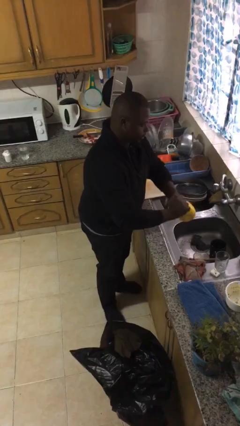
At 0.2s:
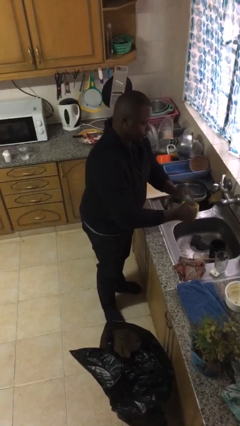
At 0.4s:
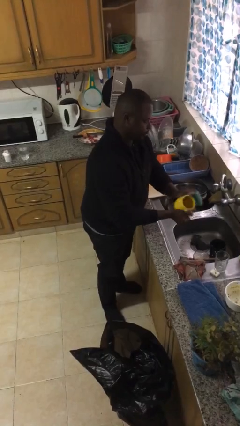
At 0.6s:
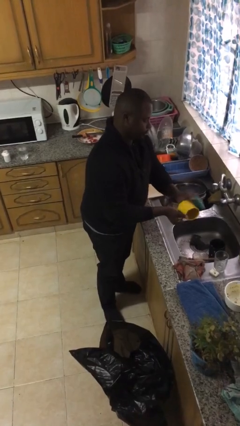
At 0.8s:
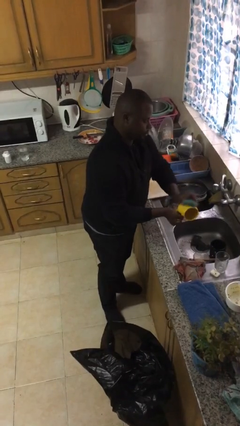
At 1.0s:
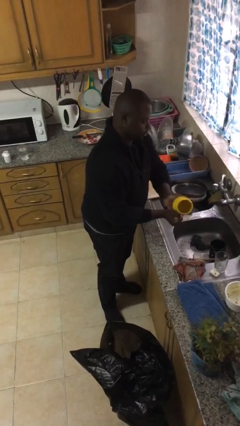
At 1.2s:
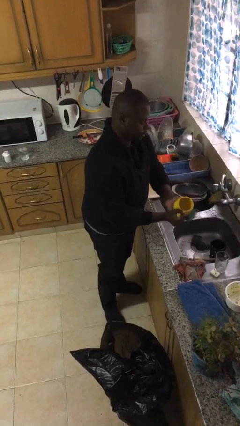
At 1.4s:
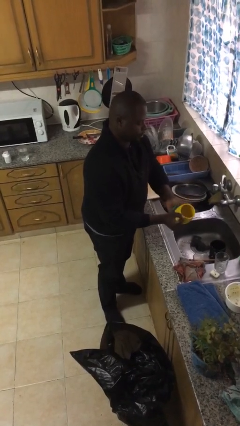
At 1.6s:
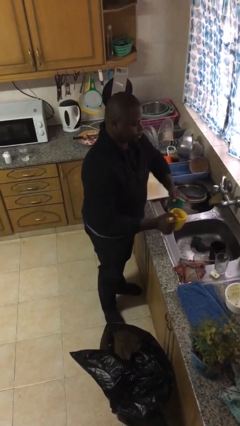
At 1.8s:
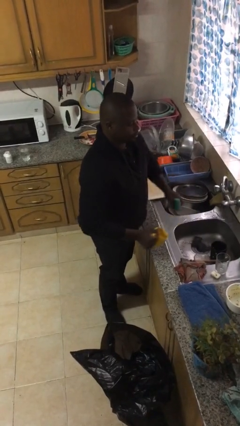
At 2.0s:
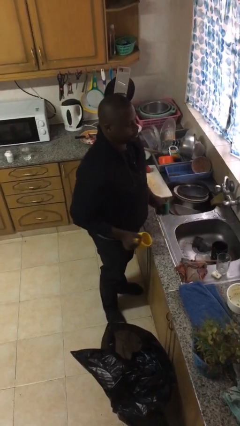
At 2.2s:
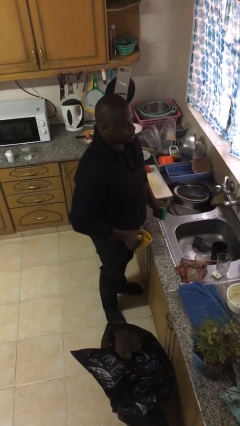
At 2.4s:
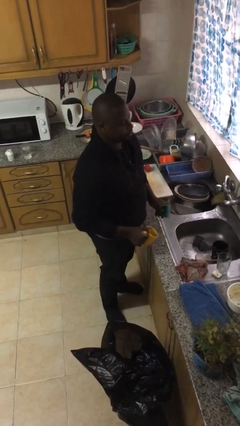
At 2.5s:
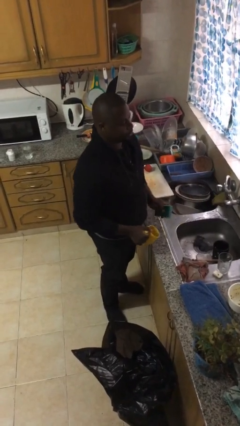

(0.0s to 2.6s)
person washes dish

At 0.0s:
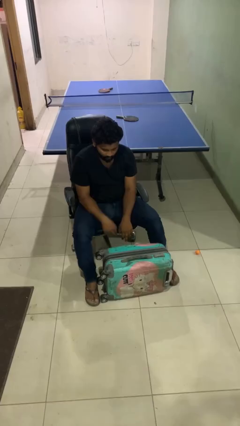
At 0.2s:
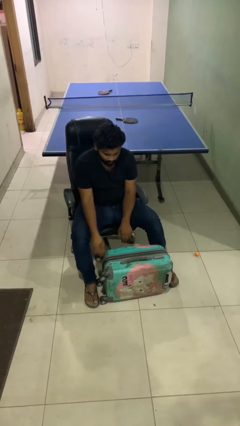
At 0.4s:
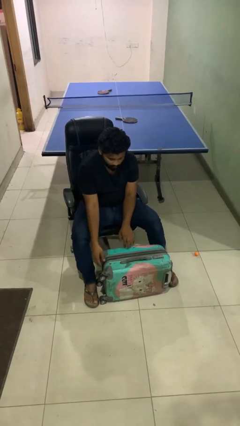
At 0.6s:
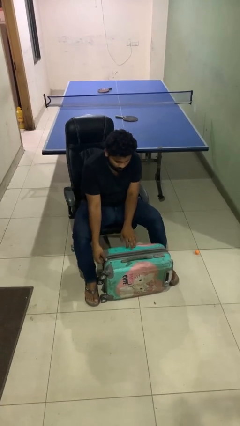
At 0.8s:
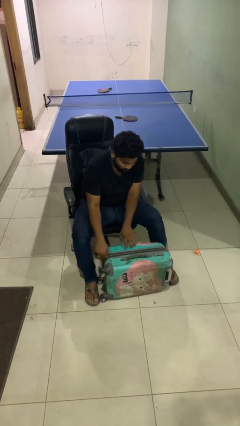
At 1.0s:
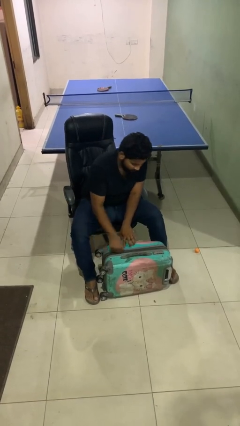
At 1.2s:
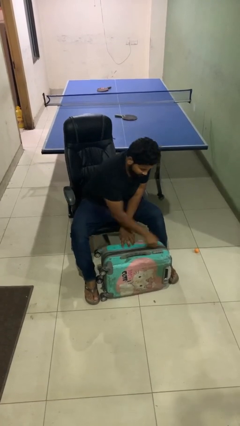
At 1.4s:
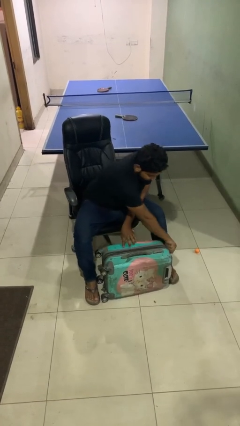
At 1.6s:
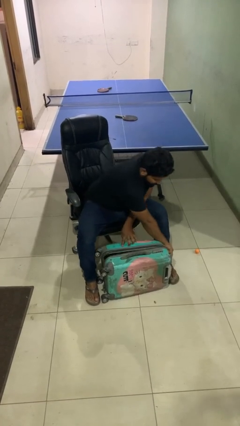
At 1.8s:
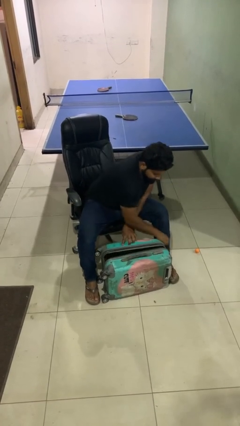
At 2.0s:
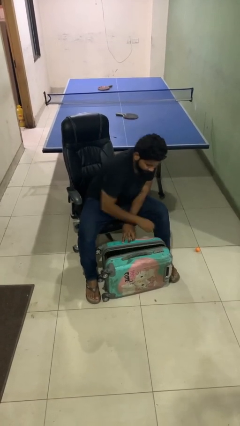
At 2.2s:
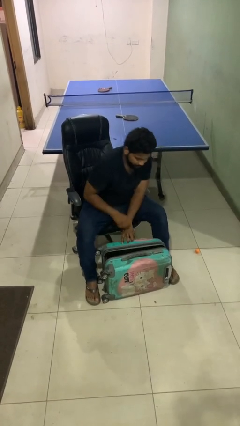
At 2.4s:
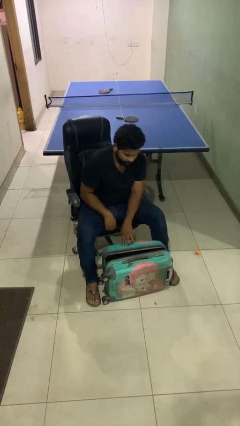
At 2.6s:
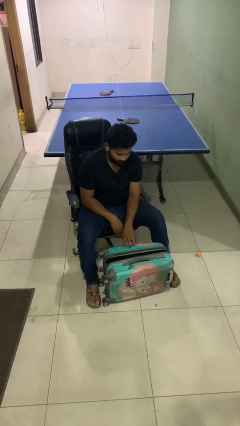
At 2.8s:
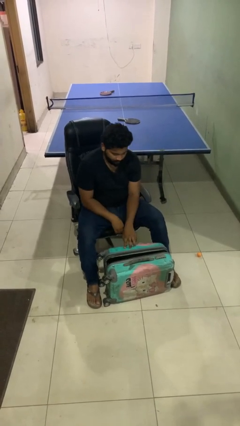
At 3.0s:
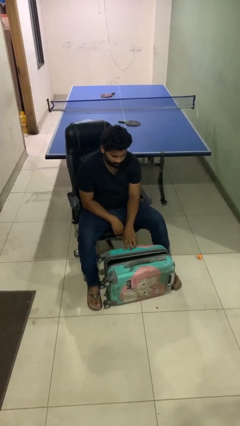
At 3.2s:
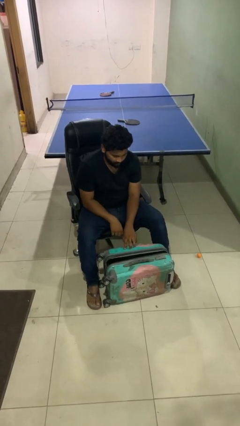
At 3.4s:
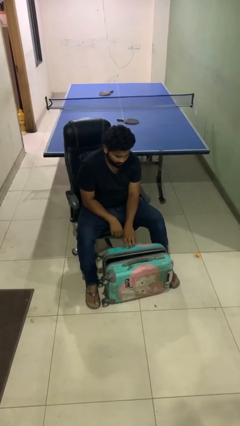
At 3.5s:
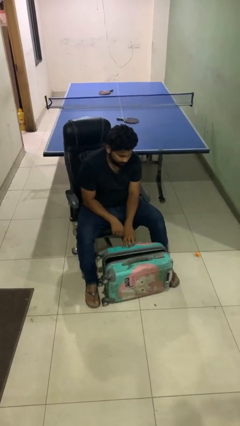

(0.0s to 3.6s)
person opens suitcase

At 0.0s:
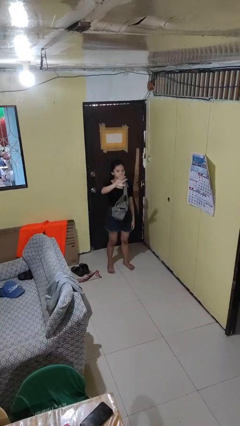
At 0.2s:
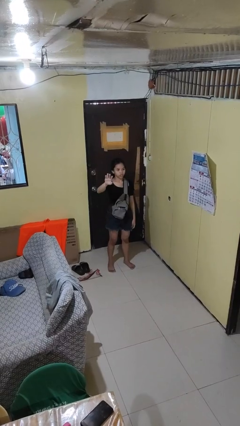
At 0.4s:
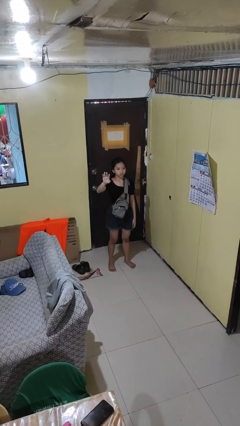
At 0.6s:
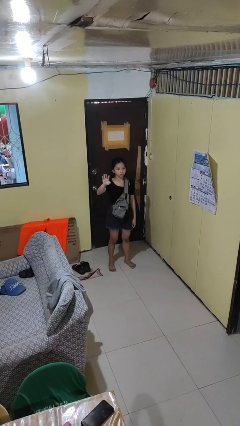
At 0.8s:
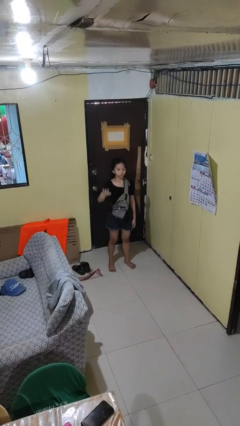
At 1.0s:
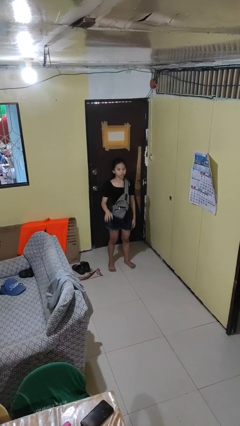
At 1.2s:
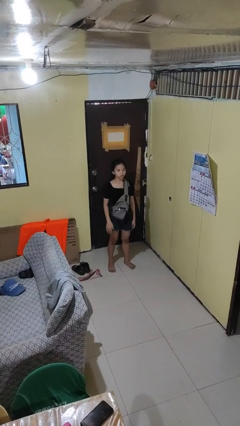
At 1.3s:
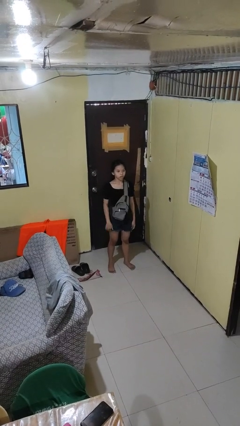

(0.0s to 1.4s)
person gestures swipe right

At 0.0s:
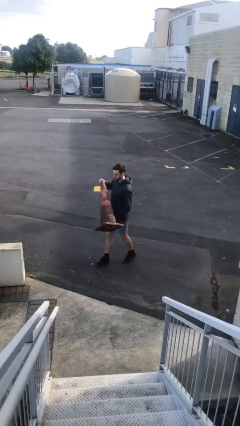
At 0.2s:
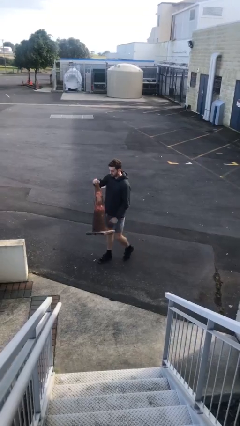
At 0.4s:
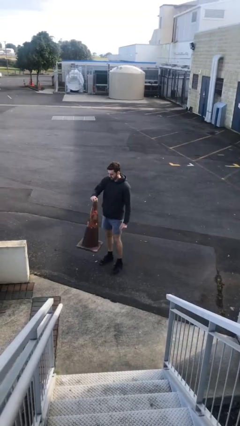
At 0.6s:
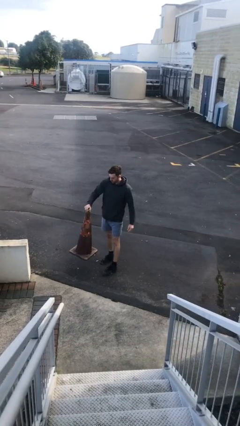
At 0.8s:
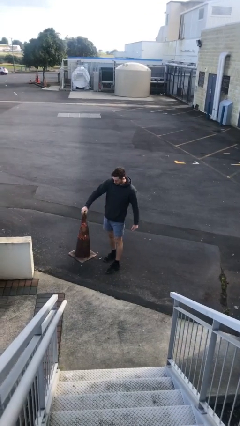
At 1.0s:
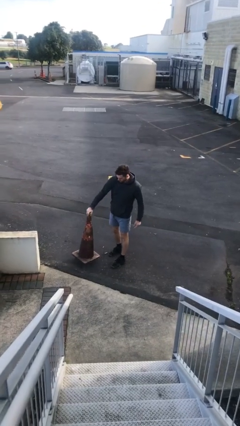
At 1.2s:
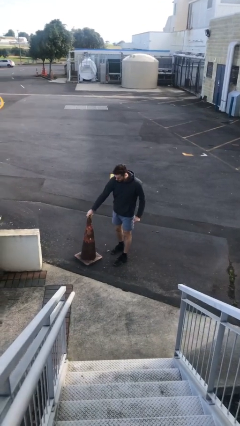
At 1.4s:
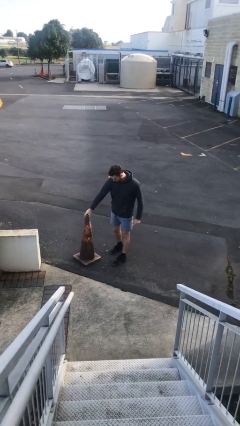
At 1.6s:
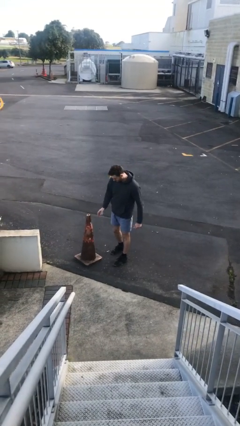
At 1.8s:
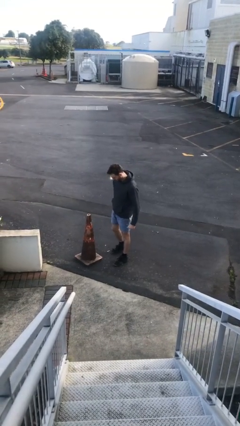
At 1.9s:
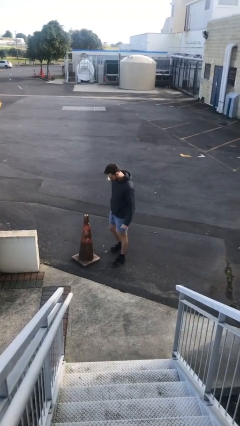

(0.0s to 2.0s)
person puts down object on floor

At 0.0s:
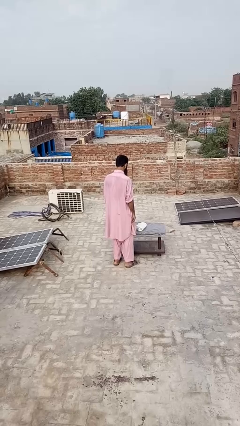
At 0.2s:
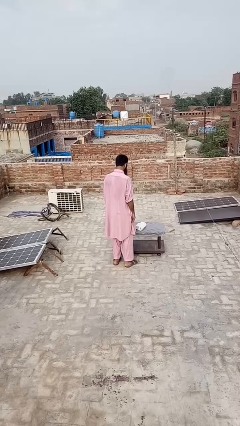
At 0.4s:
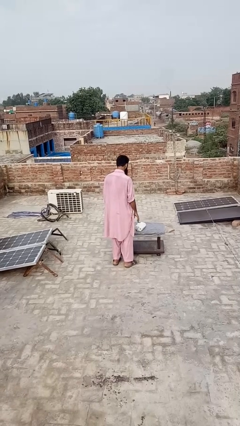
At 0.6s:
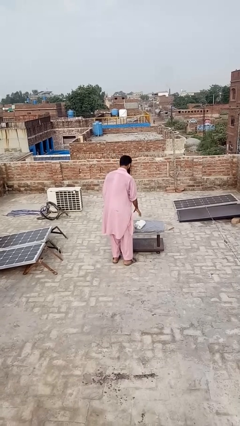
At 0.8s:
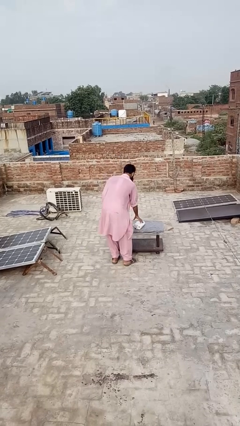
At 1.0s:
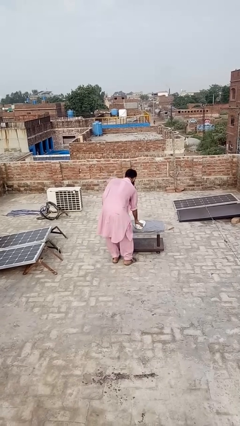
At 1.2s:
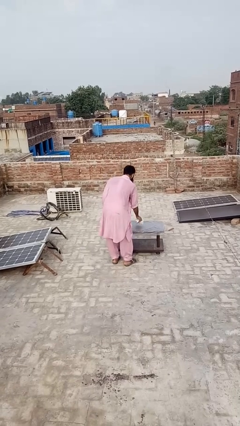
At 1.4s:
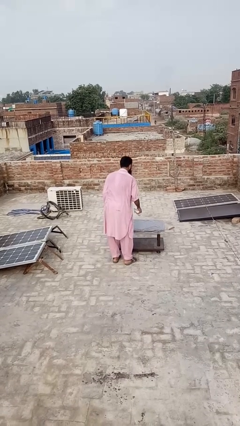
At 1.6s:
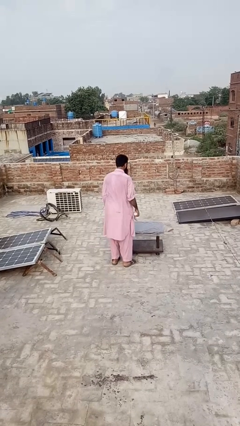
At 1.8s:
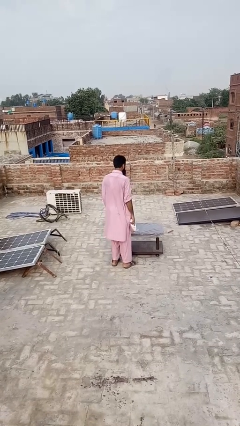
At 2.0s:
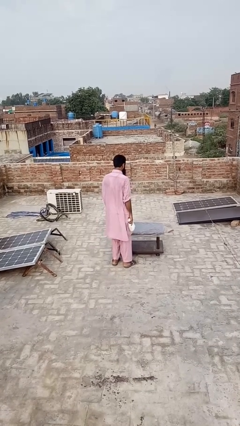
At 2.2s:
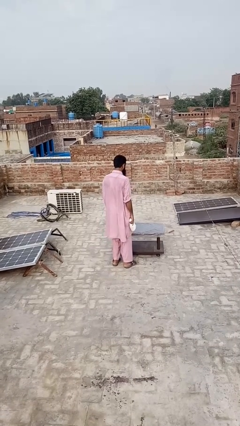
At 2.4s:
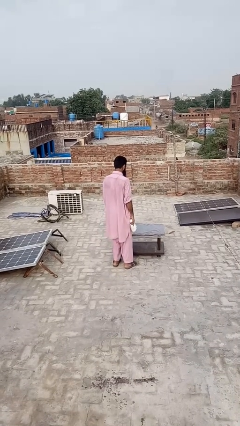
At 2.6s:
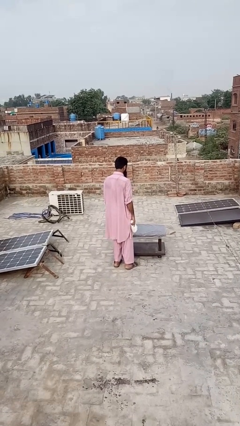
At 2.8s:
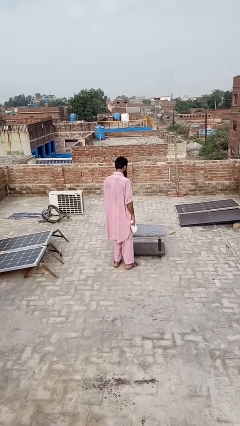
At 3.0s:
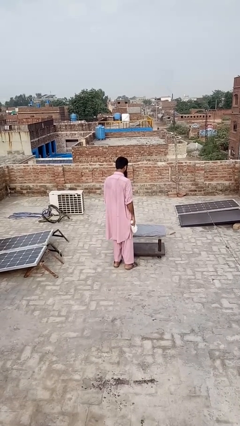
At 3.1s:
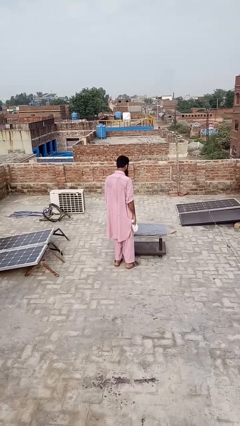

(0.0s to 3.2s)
person picks up object from table

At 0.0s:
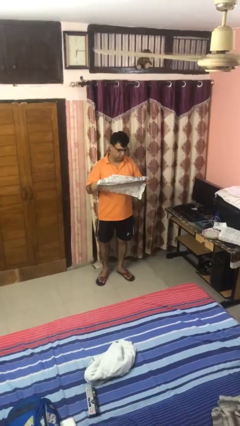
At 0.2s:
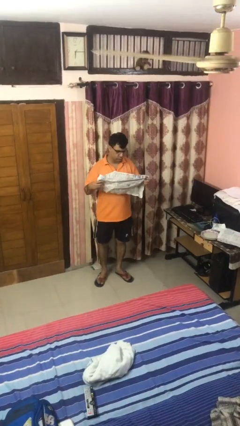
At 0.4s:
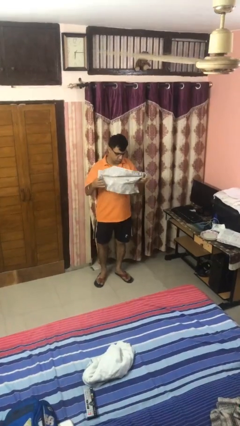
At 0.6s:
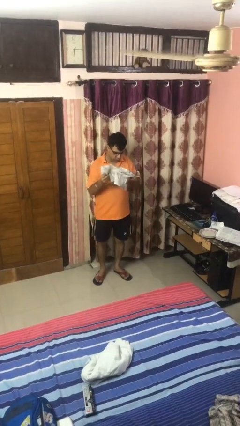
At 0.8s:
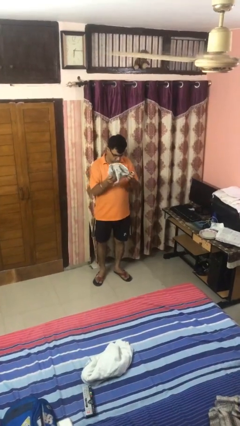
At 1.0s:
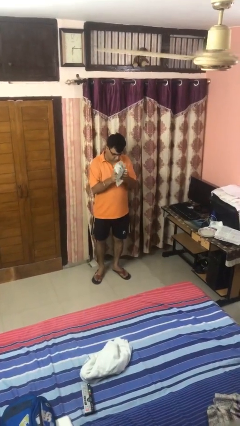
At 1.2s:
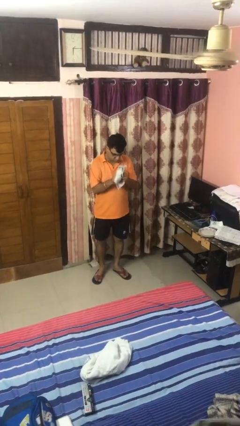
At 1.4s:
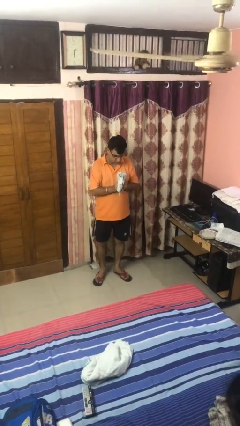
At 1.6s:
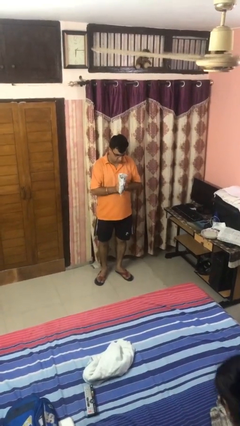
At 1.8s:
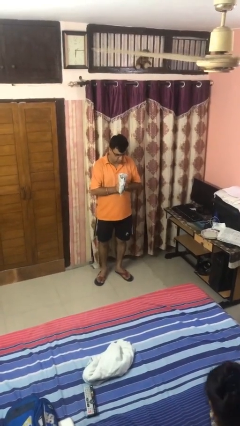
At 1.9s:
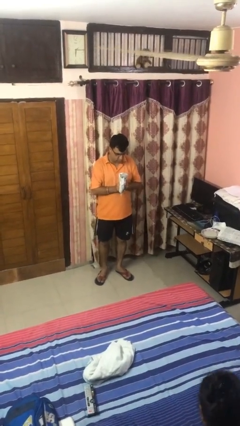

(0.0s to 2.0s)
person crumples paper

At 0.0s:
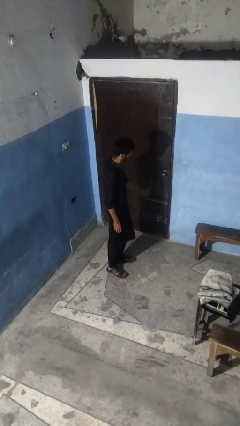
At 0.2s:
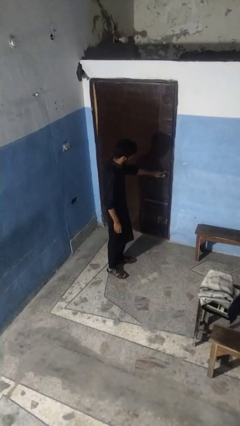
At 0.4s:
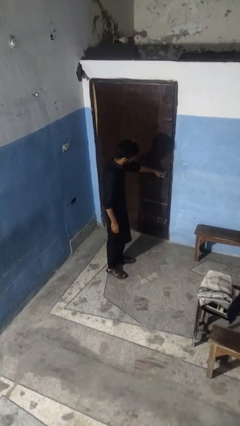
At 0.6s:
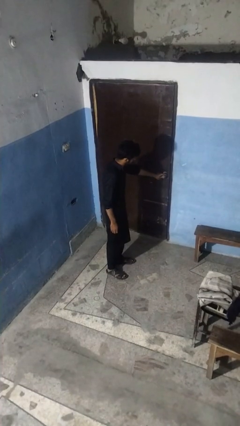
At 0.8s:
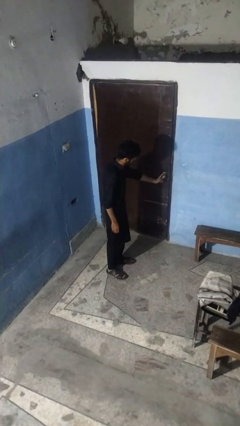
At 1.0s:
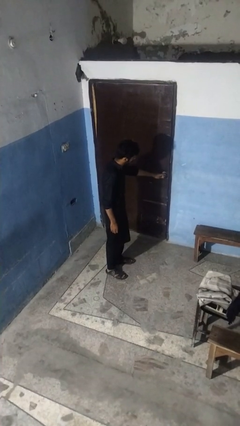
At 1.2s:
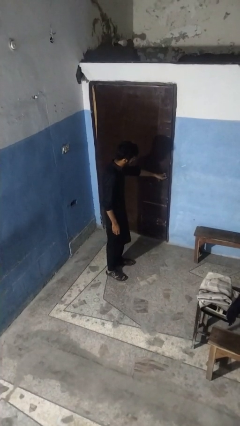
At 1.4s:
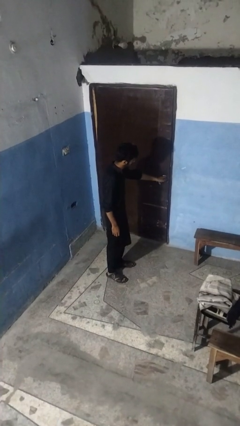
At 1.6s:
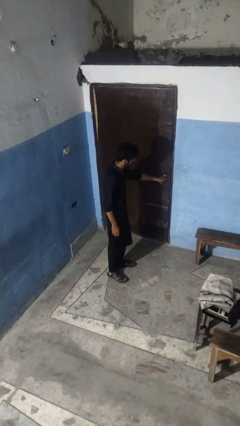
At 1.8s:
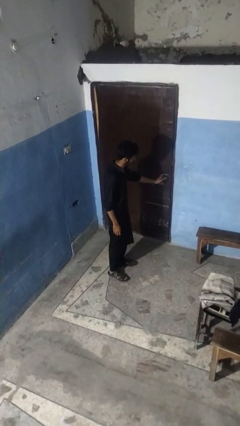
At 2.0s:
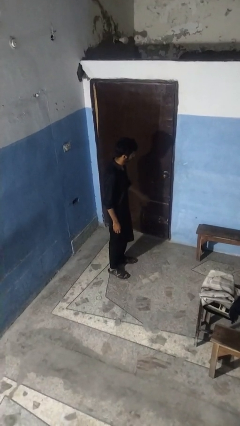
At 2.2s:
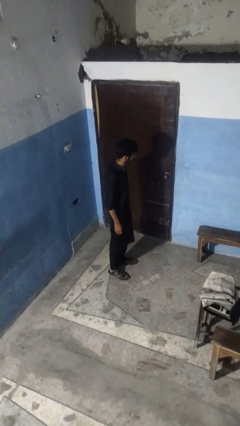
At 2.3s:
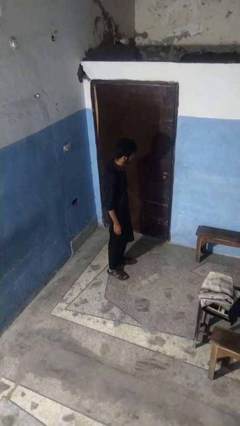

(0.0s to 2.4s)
person unlocks door with keys
